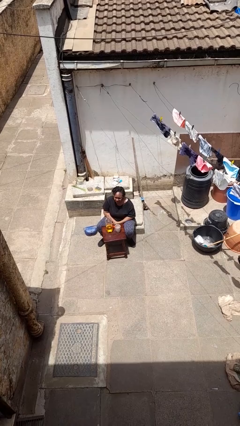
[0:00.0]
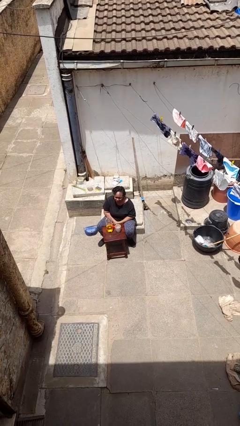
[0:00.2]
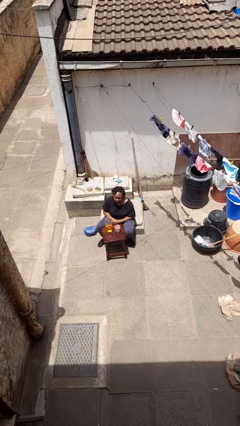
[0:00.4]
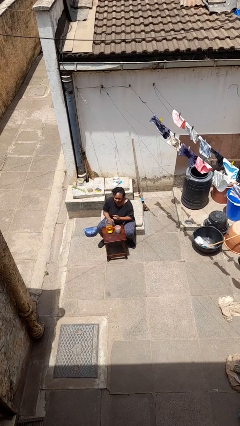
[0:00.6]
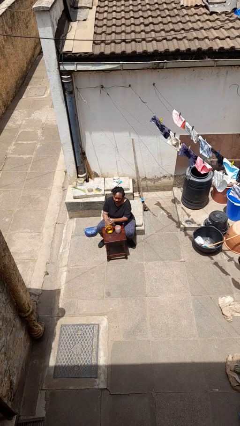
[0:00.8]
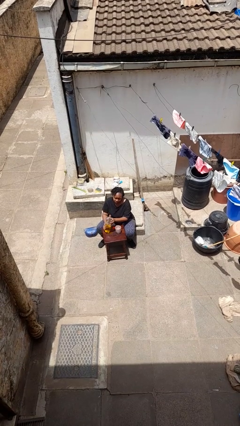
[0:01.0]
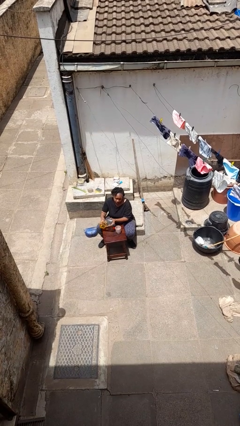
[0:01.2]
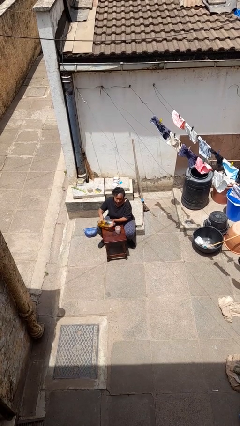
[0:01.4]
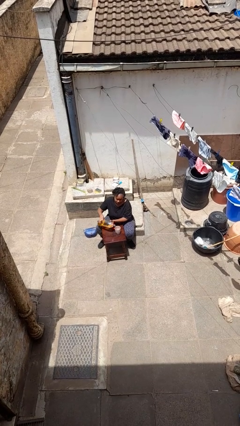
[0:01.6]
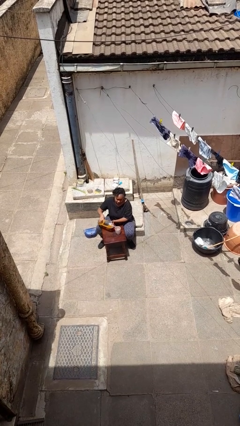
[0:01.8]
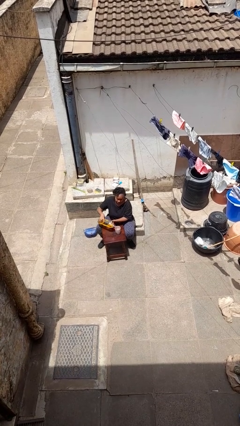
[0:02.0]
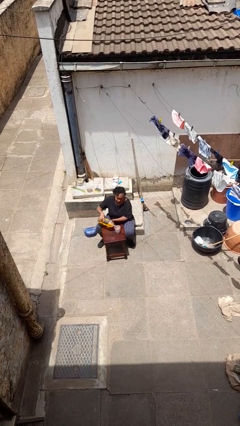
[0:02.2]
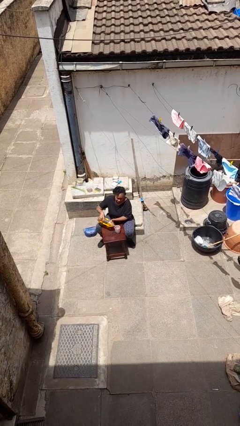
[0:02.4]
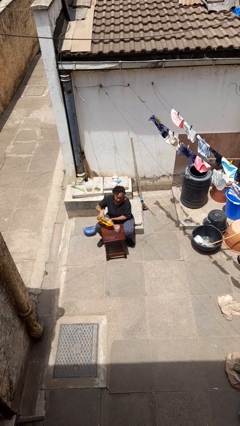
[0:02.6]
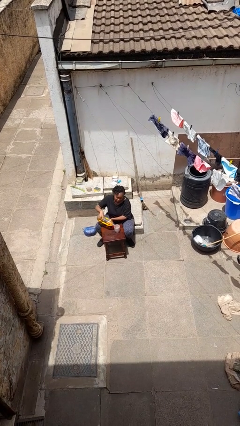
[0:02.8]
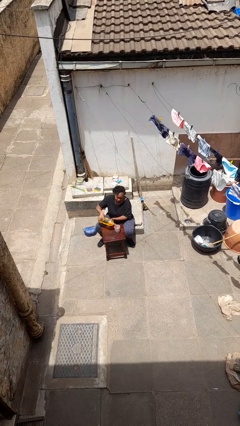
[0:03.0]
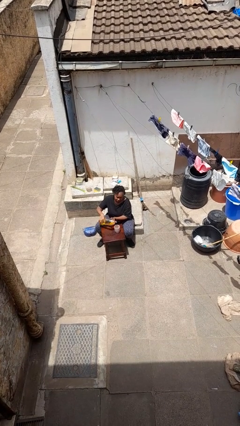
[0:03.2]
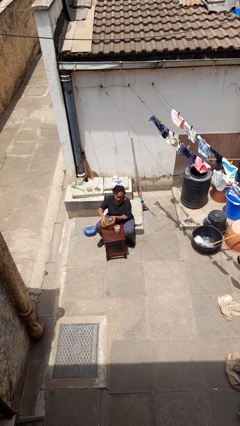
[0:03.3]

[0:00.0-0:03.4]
person pours liquid into cup

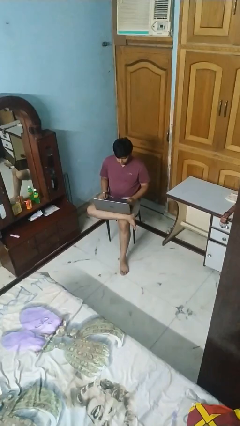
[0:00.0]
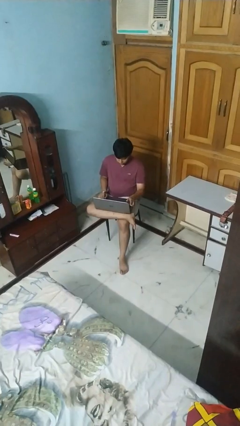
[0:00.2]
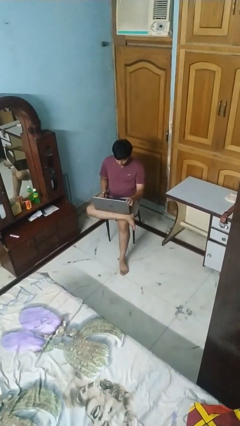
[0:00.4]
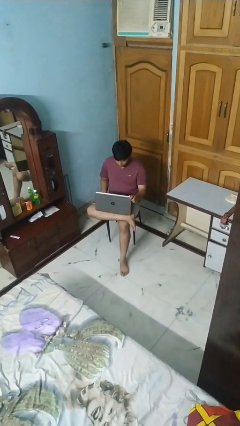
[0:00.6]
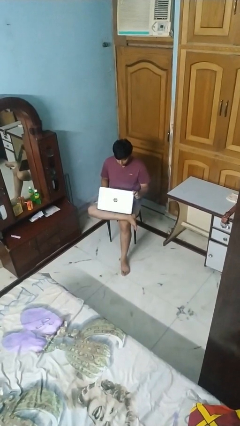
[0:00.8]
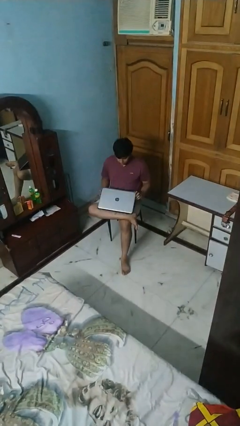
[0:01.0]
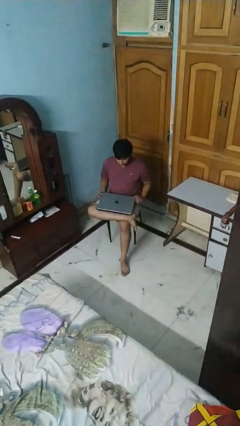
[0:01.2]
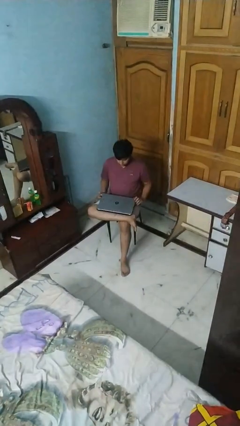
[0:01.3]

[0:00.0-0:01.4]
person closes laptop

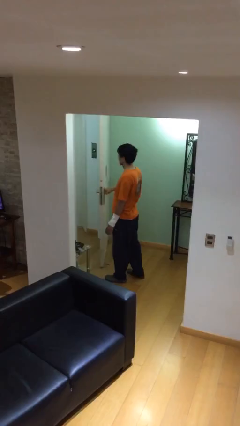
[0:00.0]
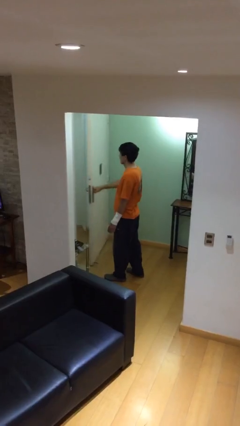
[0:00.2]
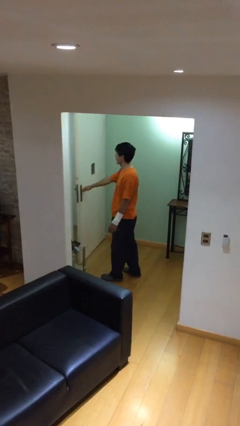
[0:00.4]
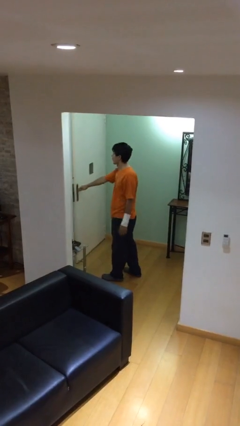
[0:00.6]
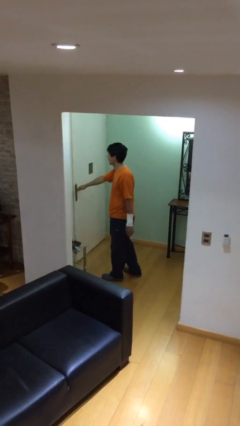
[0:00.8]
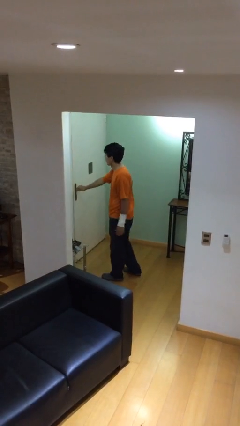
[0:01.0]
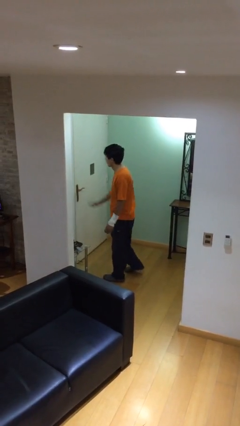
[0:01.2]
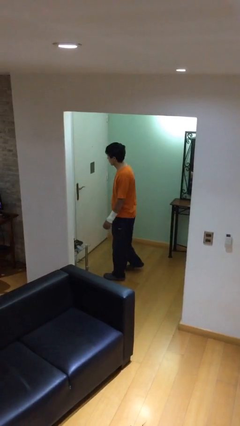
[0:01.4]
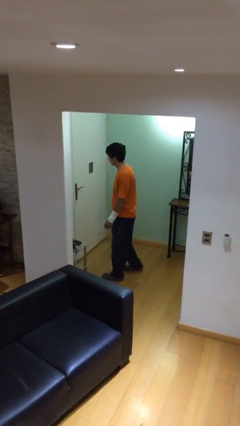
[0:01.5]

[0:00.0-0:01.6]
person closes facility door

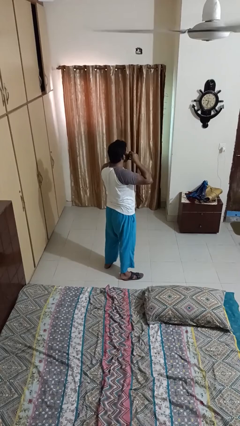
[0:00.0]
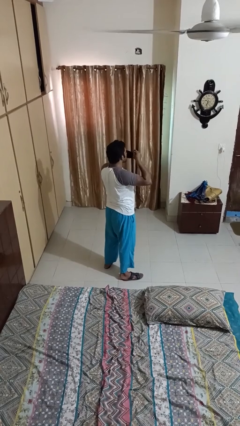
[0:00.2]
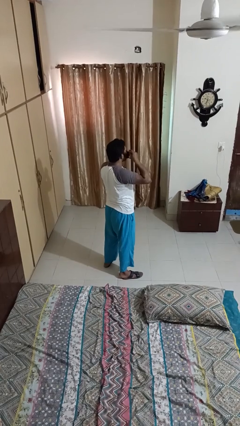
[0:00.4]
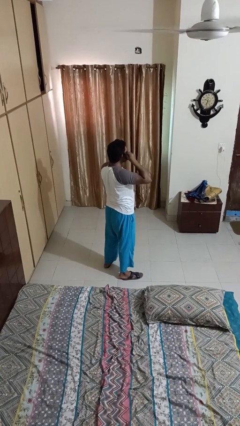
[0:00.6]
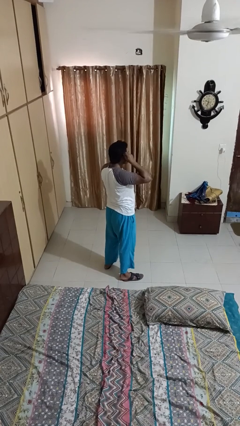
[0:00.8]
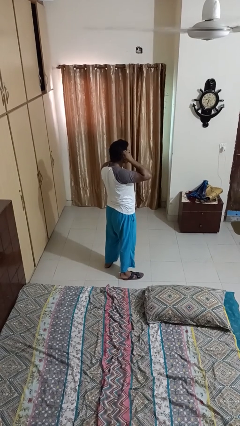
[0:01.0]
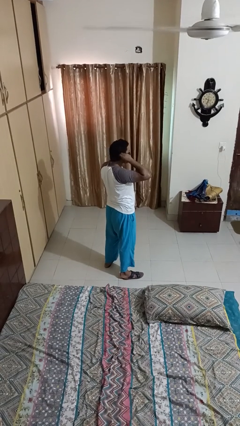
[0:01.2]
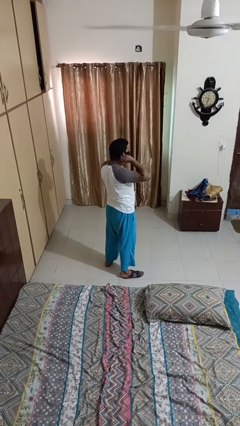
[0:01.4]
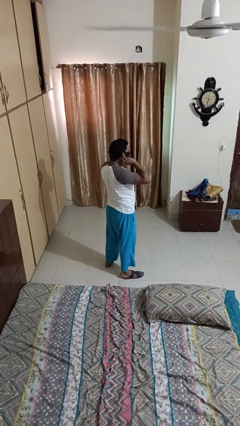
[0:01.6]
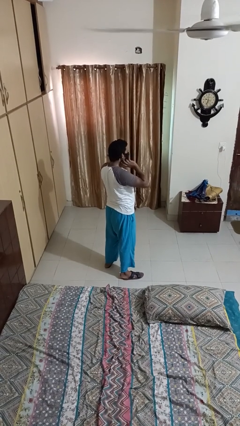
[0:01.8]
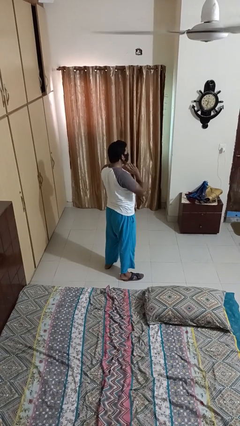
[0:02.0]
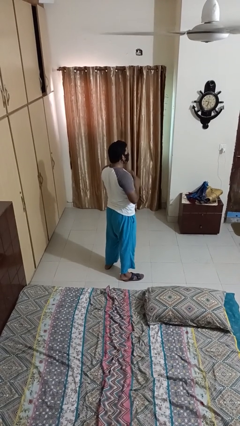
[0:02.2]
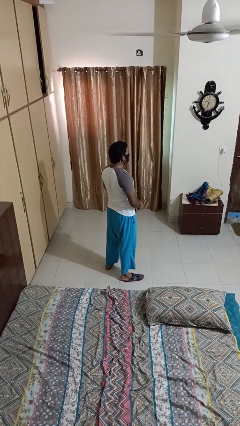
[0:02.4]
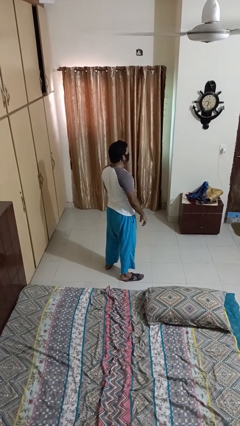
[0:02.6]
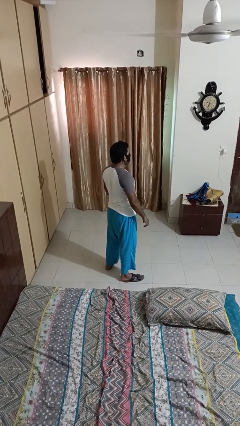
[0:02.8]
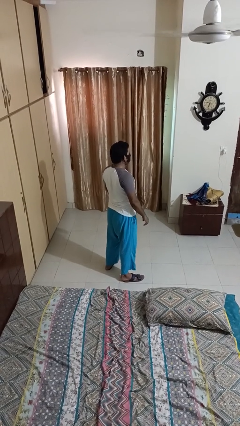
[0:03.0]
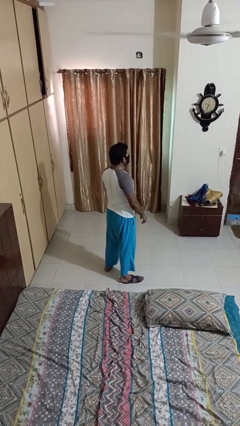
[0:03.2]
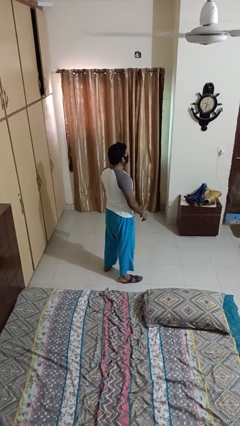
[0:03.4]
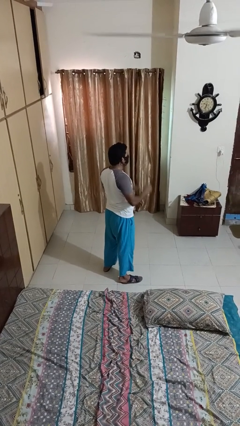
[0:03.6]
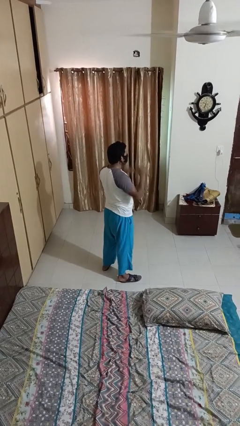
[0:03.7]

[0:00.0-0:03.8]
person puts on facemask

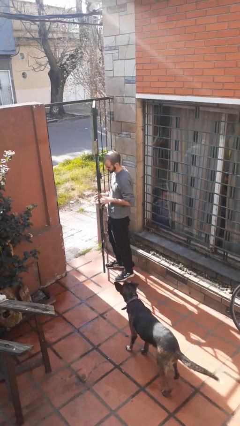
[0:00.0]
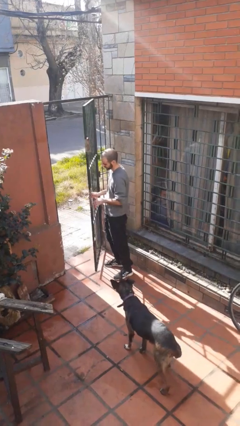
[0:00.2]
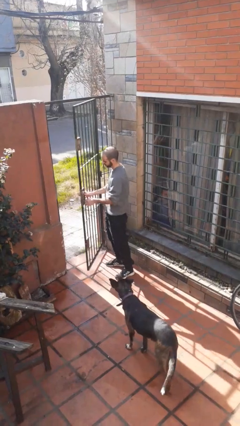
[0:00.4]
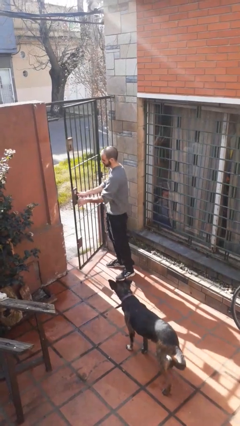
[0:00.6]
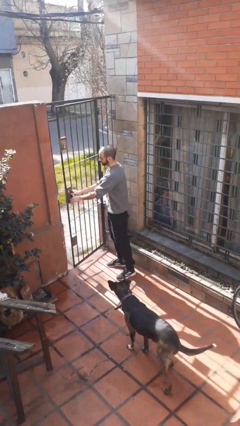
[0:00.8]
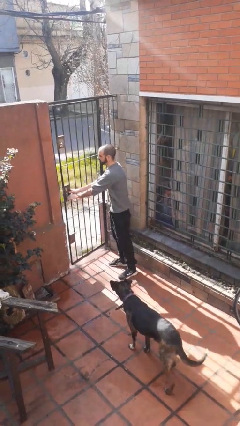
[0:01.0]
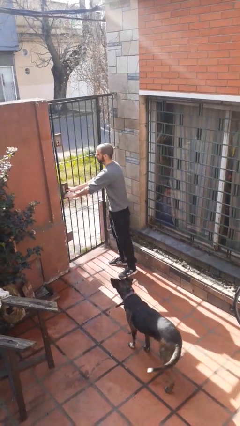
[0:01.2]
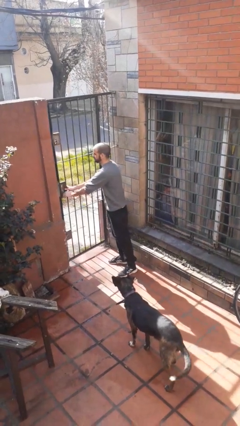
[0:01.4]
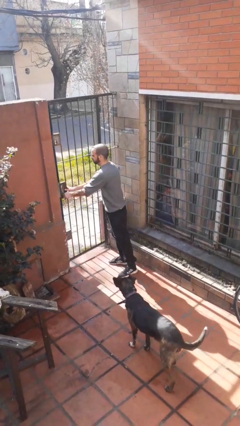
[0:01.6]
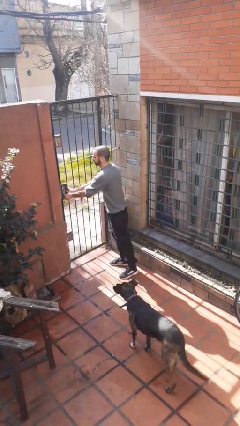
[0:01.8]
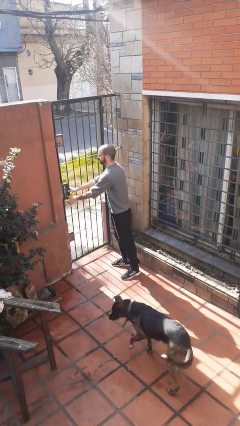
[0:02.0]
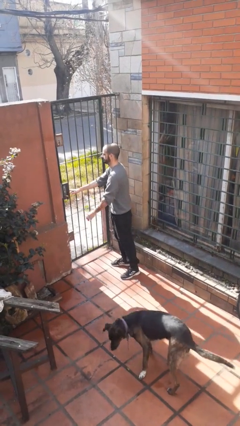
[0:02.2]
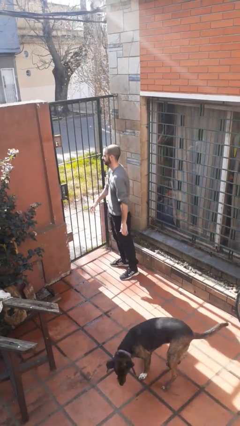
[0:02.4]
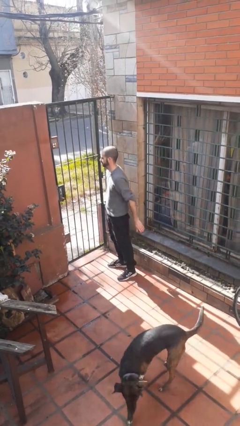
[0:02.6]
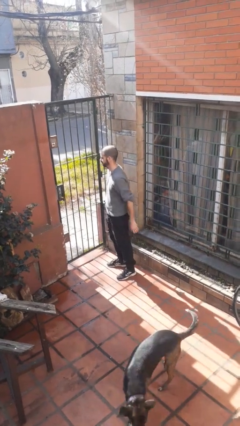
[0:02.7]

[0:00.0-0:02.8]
person closes gate

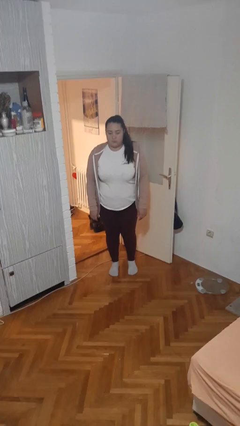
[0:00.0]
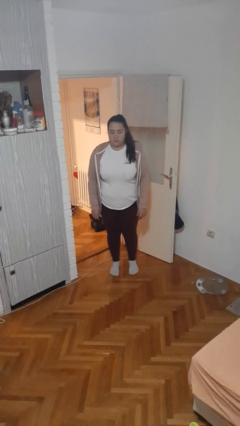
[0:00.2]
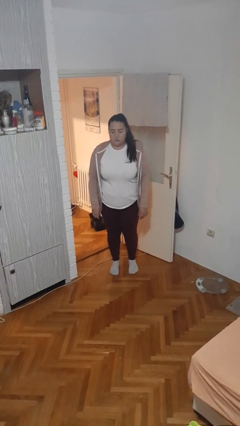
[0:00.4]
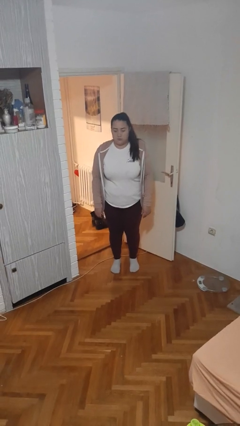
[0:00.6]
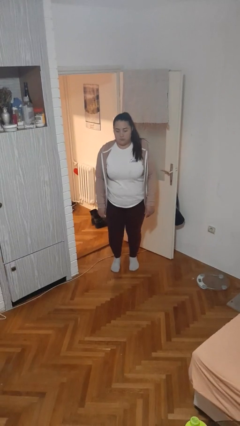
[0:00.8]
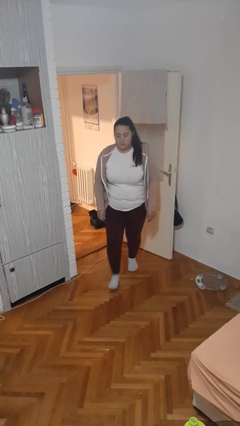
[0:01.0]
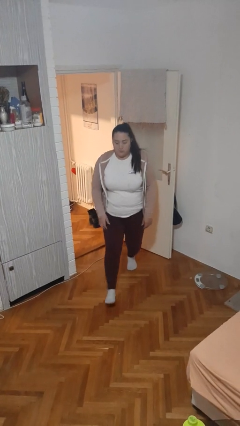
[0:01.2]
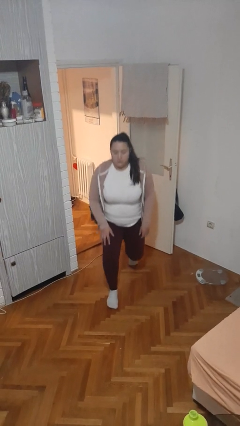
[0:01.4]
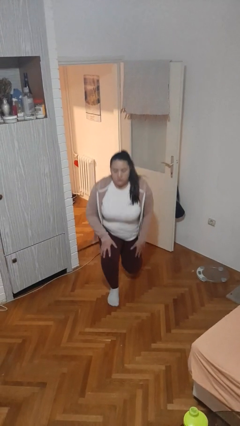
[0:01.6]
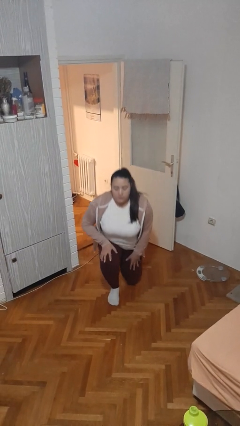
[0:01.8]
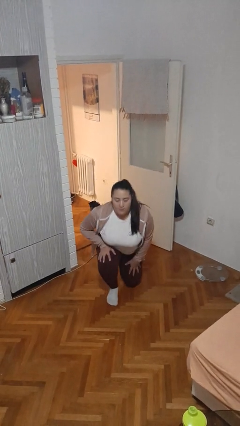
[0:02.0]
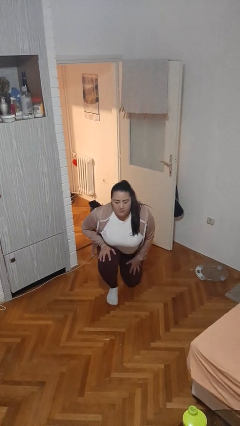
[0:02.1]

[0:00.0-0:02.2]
person kneels

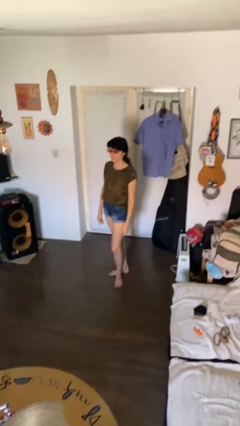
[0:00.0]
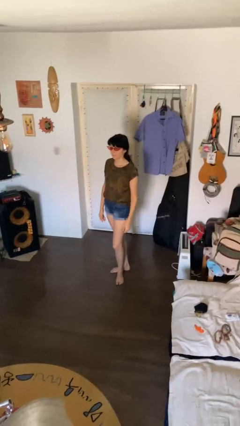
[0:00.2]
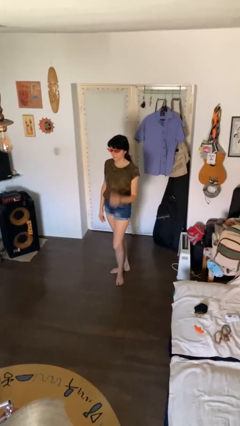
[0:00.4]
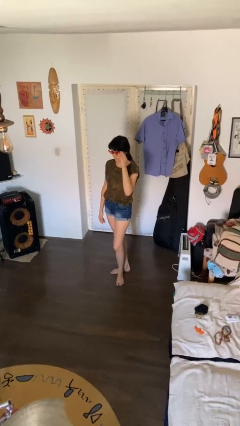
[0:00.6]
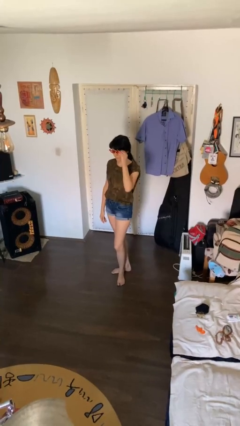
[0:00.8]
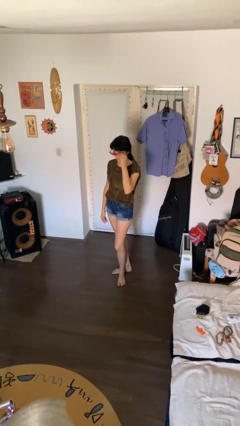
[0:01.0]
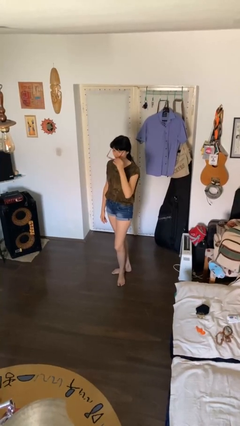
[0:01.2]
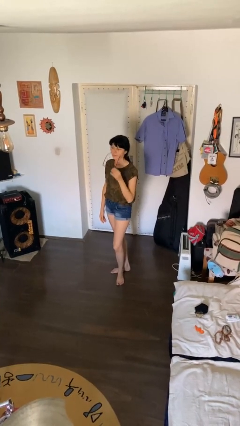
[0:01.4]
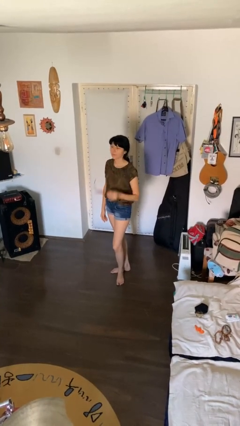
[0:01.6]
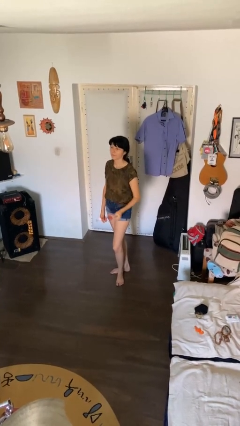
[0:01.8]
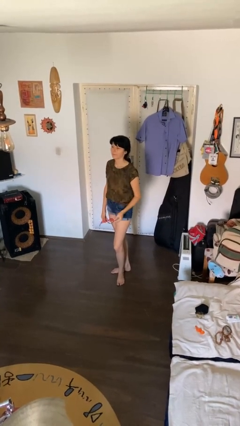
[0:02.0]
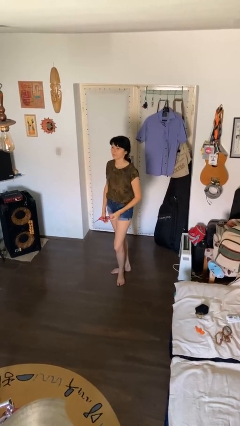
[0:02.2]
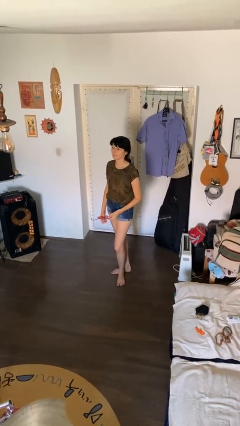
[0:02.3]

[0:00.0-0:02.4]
person takes off sunglasses
